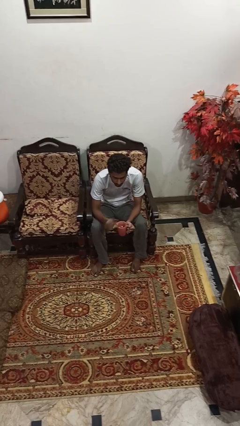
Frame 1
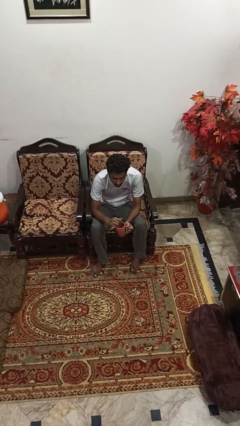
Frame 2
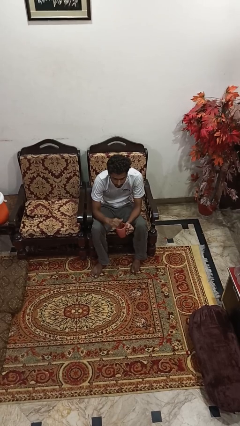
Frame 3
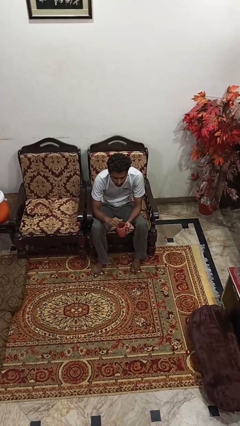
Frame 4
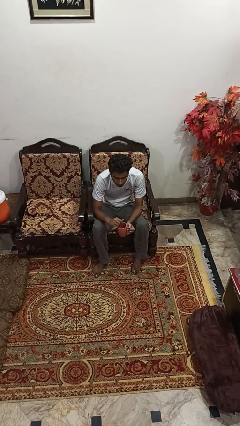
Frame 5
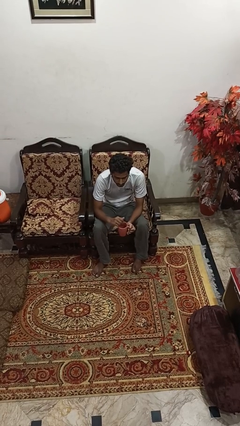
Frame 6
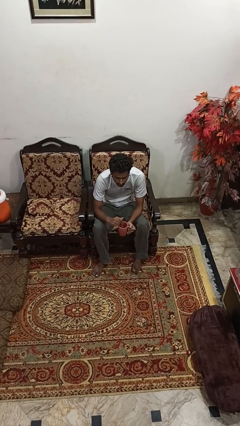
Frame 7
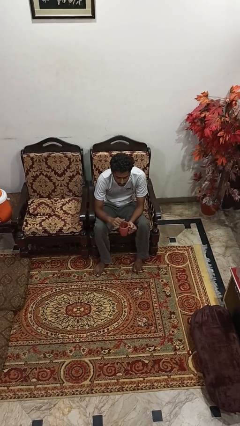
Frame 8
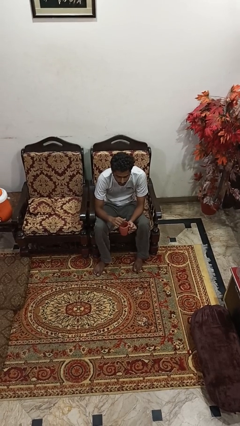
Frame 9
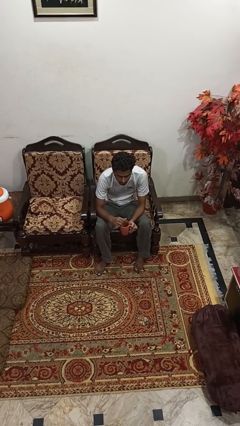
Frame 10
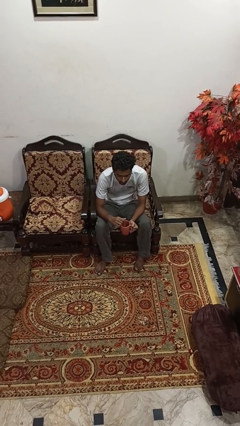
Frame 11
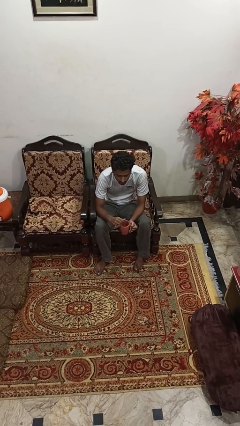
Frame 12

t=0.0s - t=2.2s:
person stirs mug

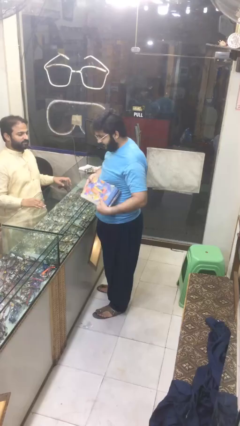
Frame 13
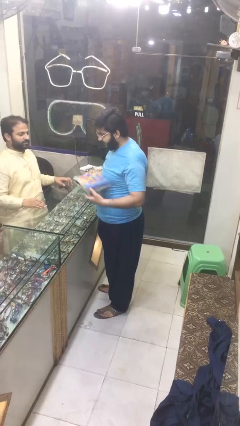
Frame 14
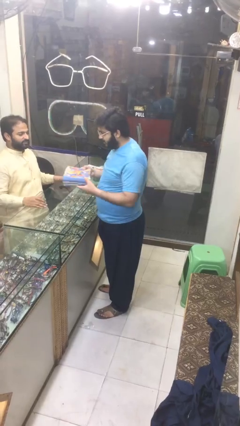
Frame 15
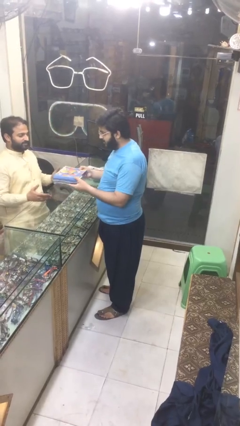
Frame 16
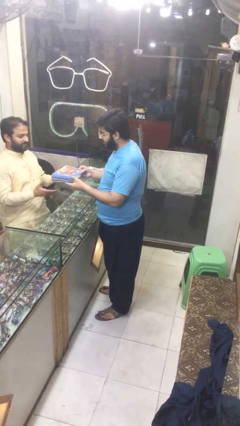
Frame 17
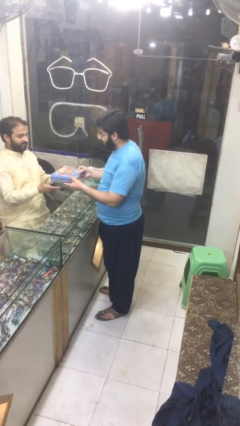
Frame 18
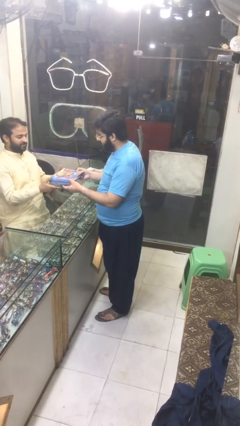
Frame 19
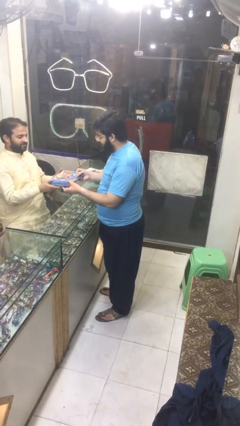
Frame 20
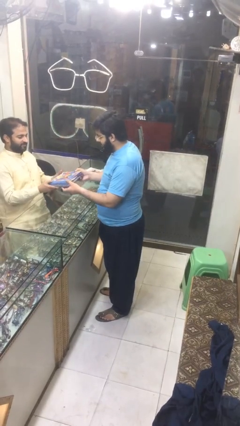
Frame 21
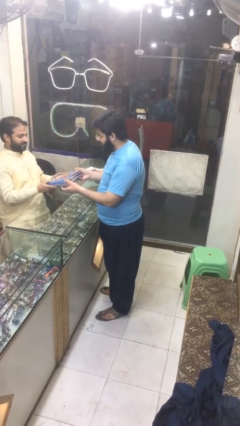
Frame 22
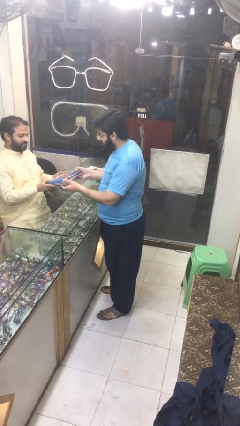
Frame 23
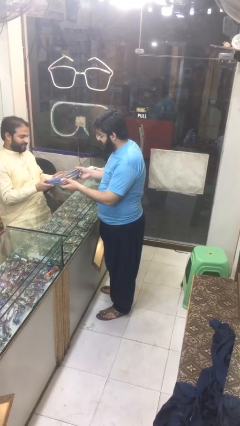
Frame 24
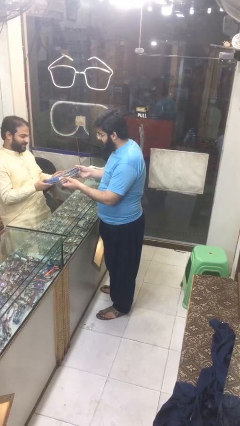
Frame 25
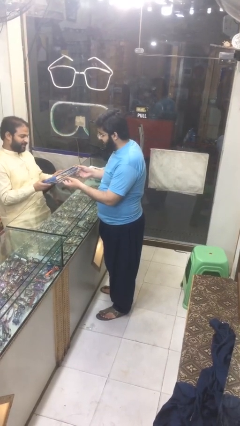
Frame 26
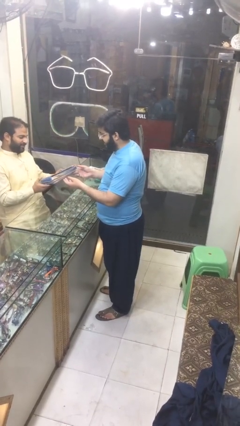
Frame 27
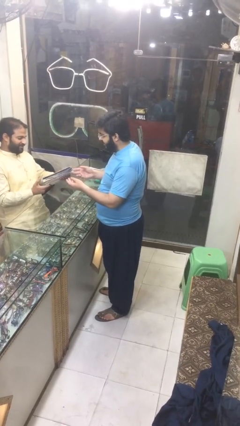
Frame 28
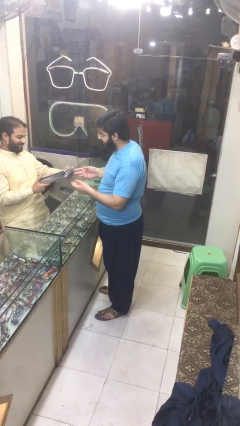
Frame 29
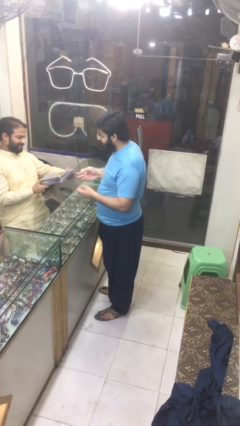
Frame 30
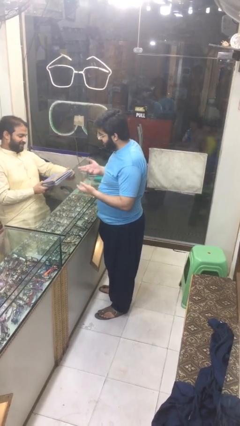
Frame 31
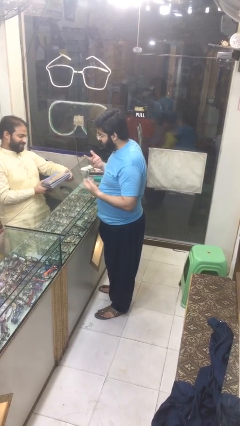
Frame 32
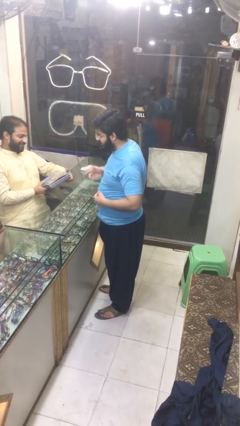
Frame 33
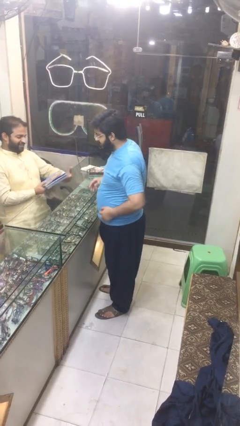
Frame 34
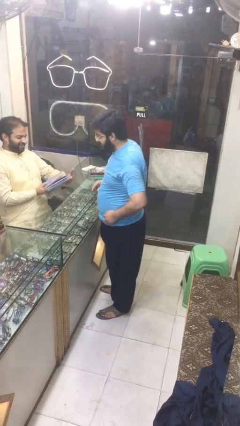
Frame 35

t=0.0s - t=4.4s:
person transfers object to person

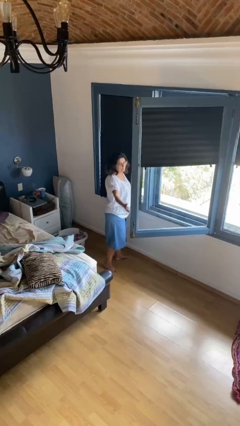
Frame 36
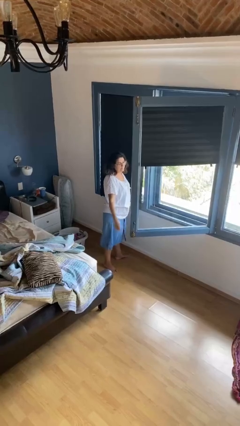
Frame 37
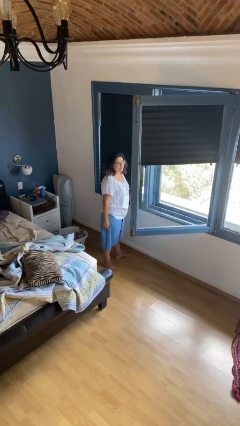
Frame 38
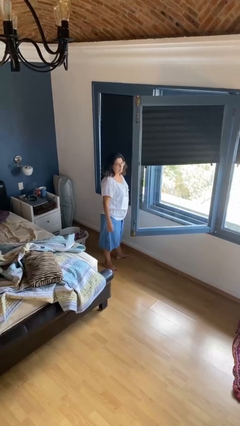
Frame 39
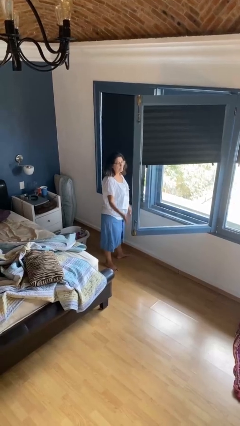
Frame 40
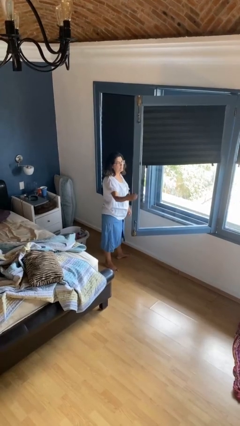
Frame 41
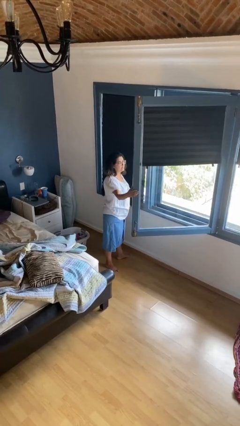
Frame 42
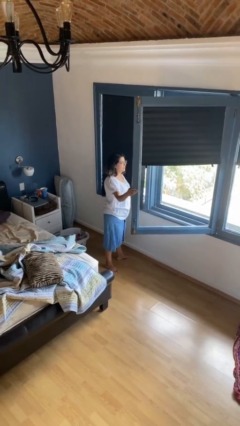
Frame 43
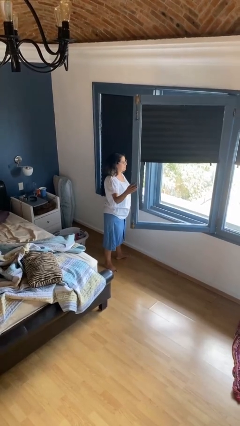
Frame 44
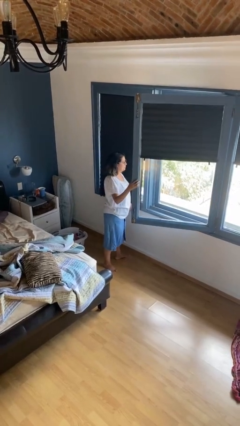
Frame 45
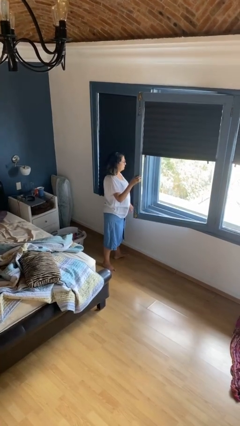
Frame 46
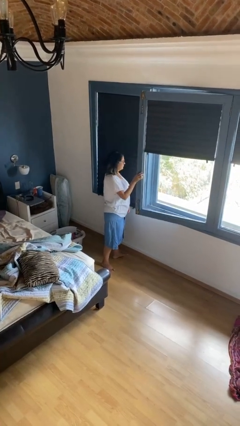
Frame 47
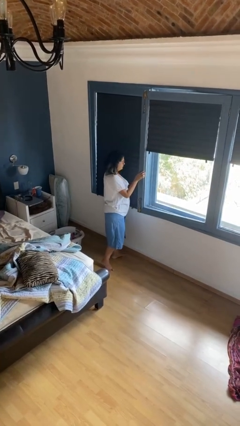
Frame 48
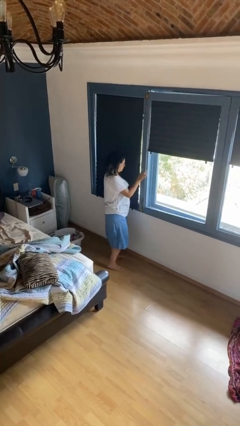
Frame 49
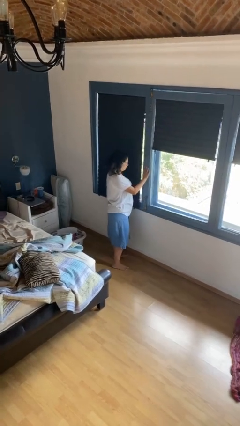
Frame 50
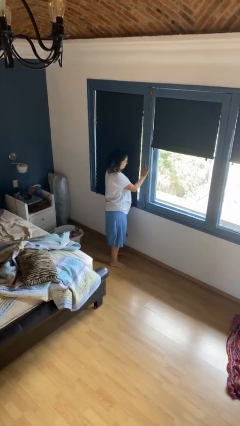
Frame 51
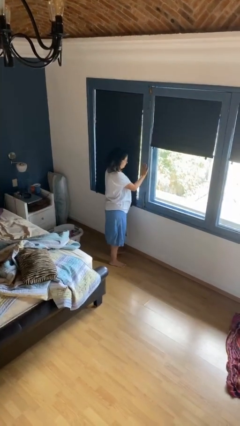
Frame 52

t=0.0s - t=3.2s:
person closes home window

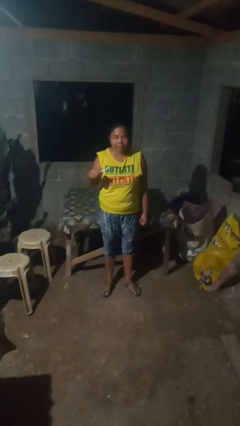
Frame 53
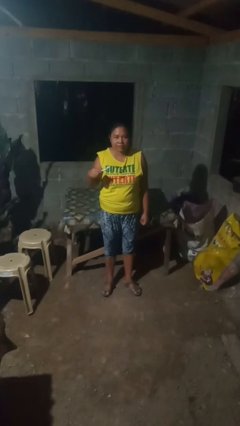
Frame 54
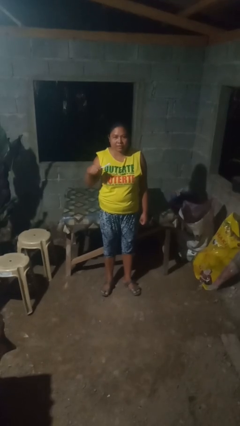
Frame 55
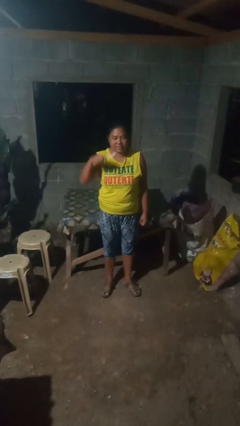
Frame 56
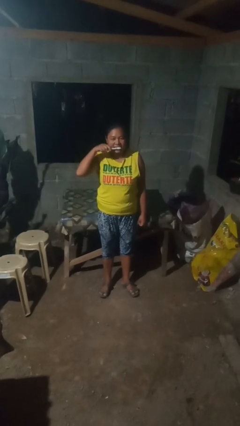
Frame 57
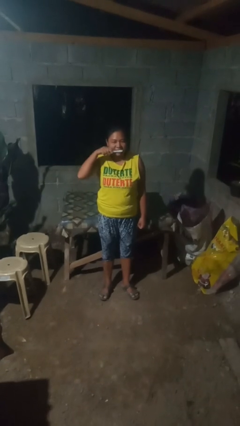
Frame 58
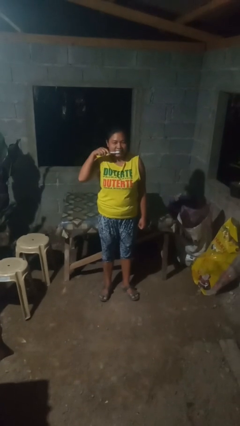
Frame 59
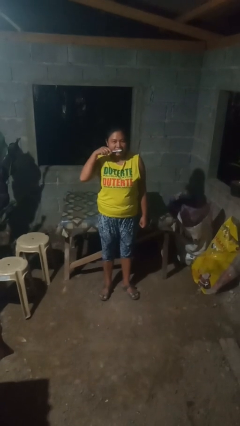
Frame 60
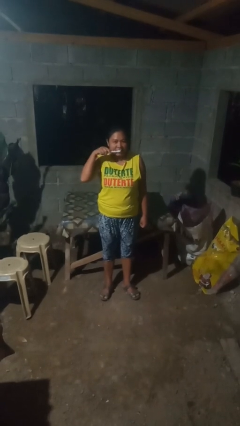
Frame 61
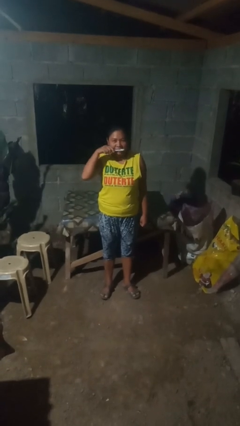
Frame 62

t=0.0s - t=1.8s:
person brushes teeth

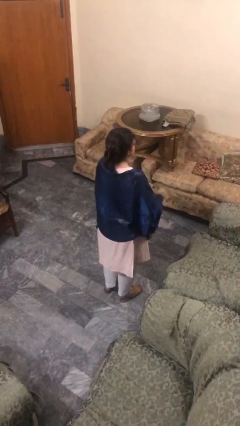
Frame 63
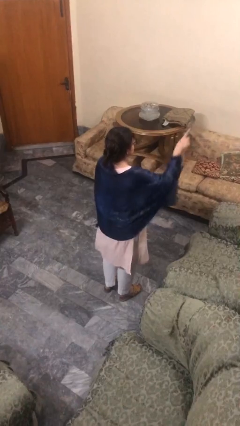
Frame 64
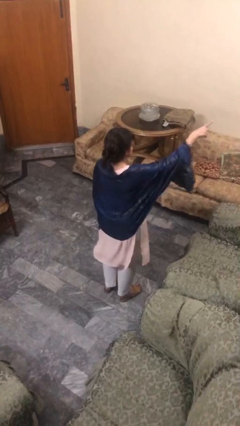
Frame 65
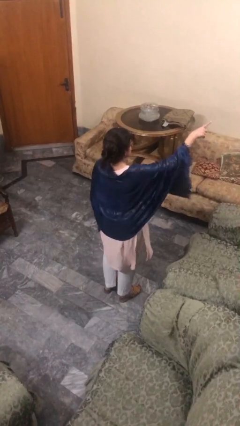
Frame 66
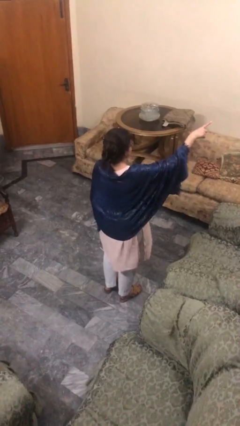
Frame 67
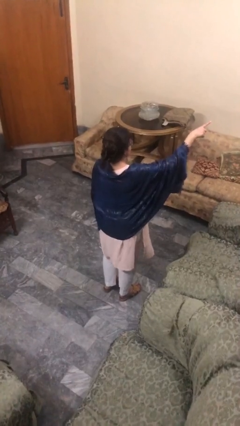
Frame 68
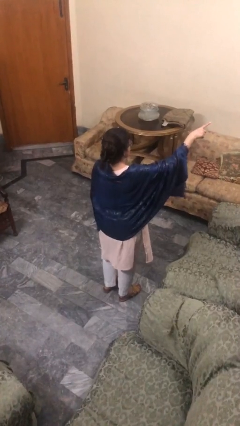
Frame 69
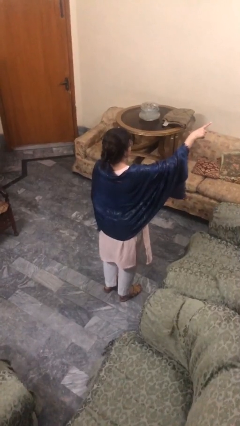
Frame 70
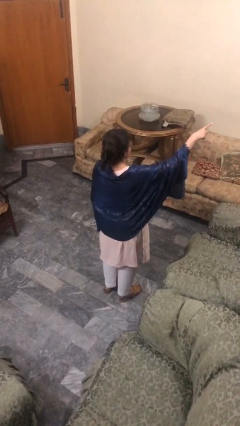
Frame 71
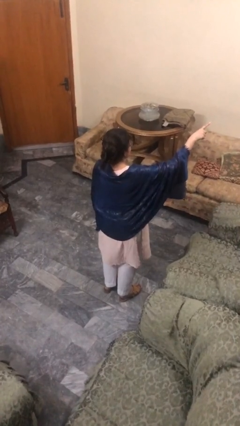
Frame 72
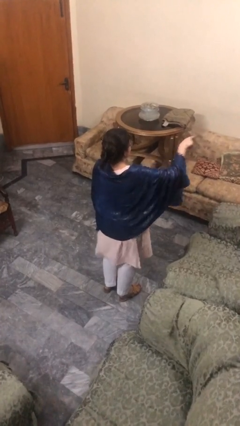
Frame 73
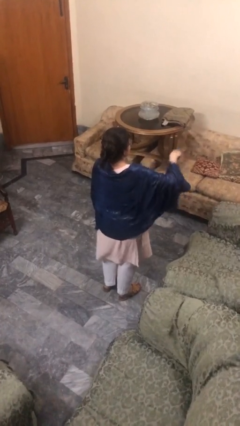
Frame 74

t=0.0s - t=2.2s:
person points at person

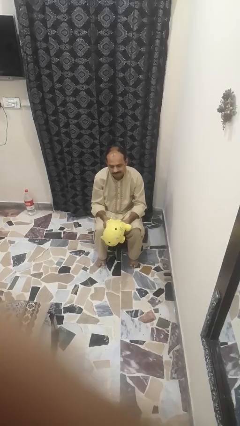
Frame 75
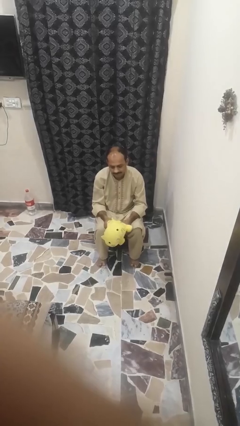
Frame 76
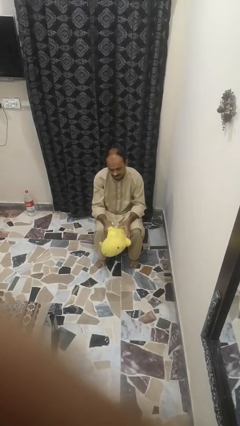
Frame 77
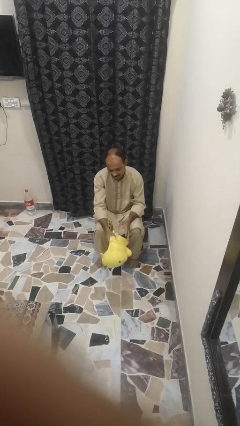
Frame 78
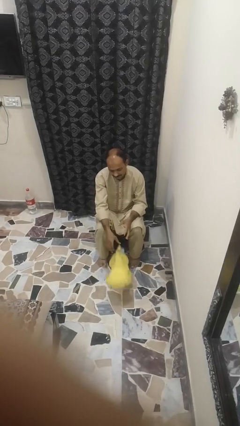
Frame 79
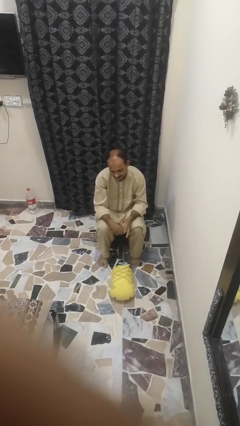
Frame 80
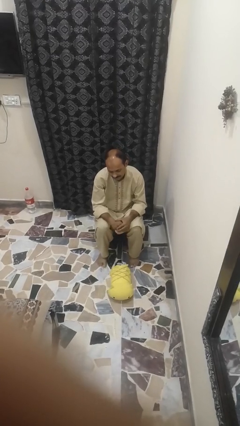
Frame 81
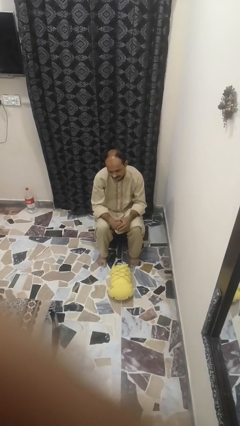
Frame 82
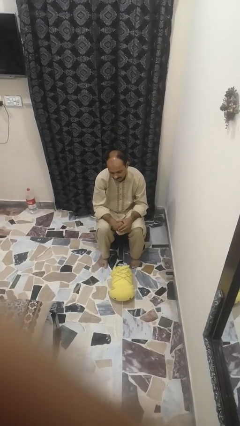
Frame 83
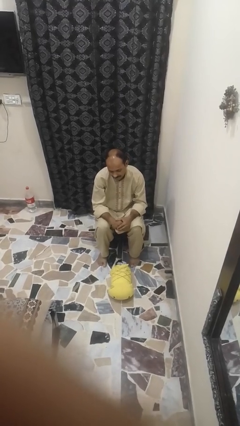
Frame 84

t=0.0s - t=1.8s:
person drops object

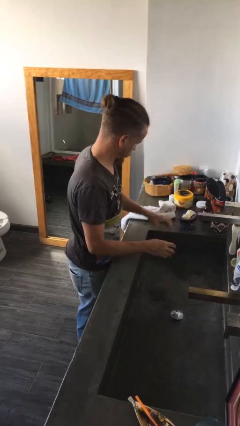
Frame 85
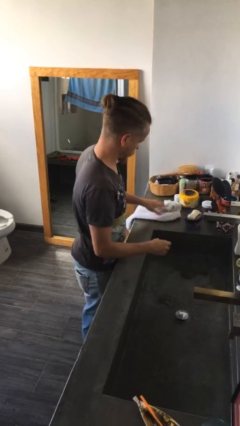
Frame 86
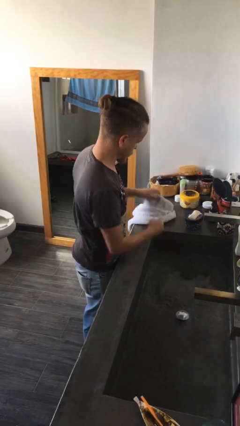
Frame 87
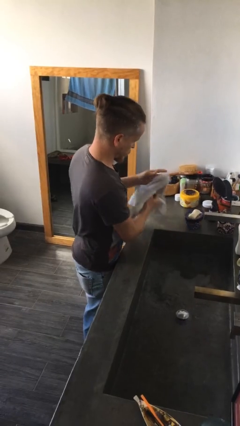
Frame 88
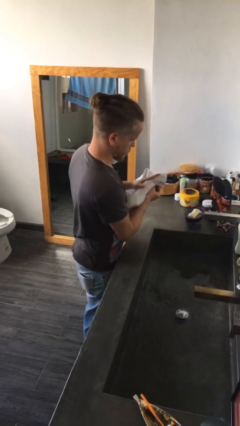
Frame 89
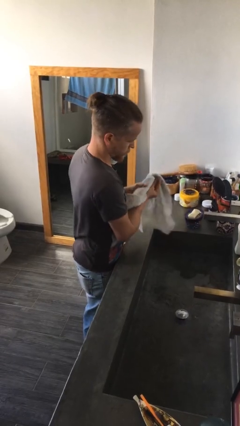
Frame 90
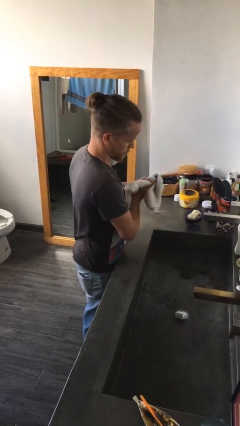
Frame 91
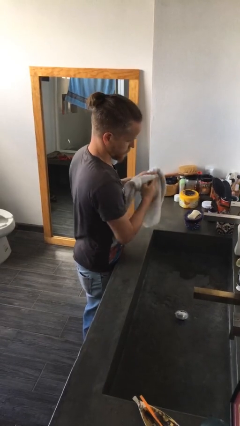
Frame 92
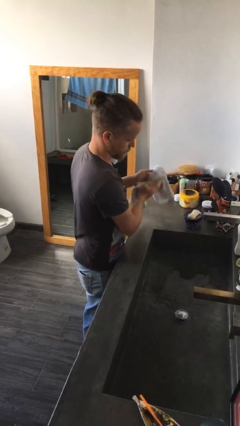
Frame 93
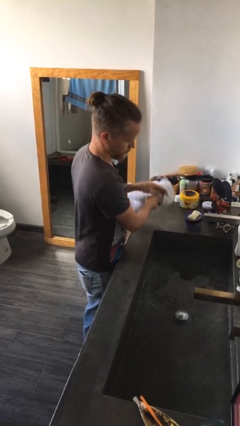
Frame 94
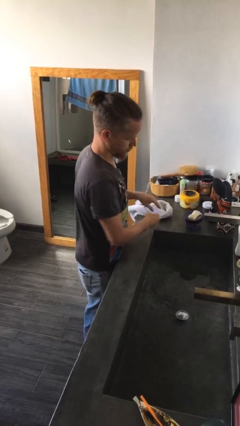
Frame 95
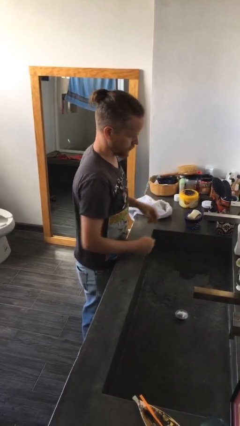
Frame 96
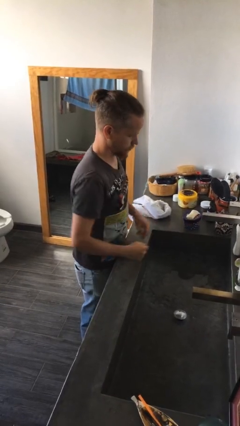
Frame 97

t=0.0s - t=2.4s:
person dries hands with towel
